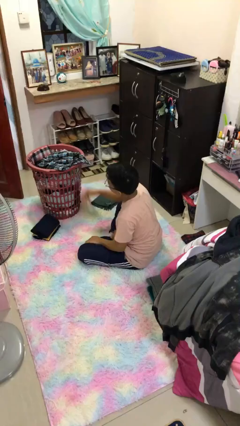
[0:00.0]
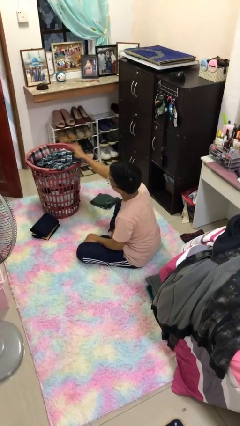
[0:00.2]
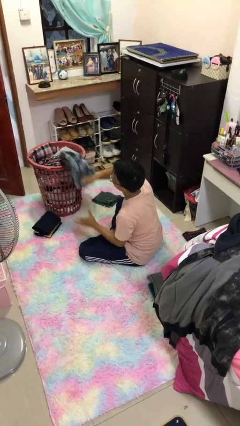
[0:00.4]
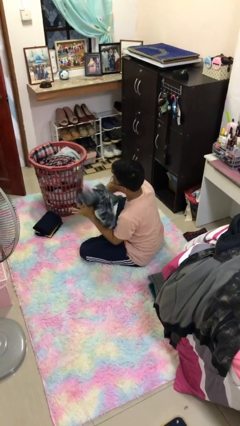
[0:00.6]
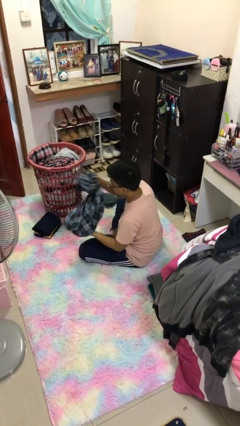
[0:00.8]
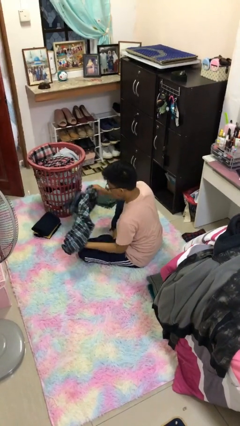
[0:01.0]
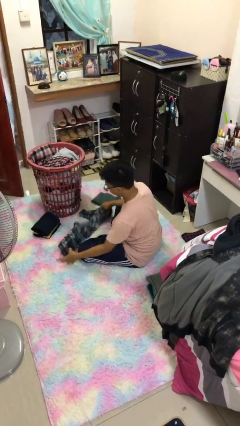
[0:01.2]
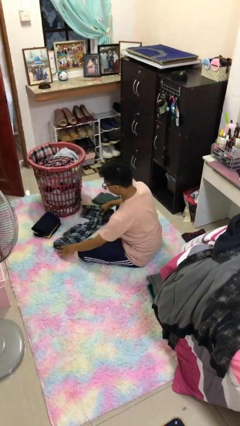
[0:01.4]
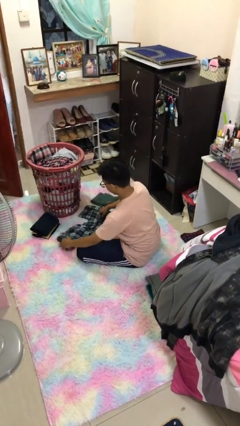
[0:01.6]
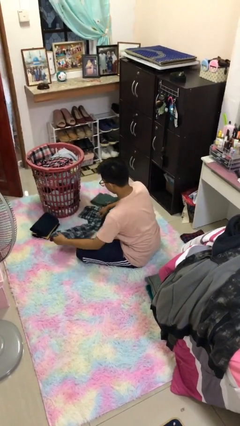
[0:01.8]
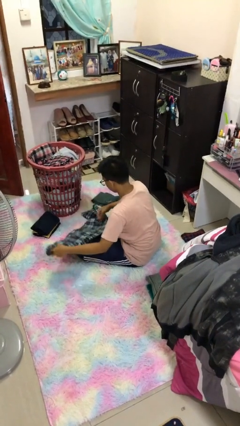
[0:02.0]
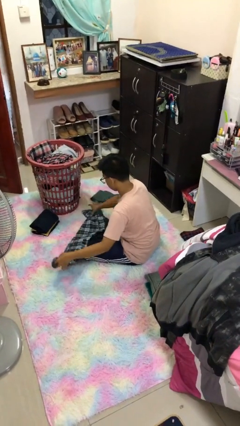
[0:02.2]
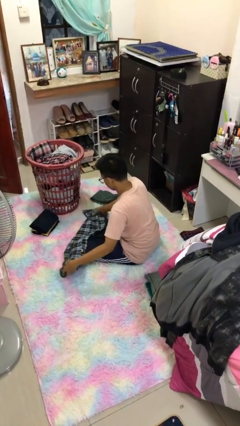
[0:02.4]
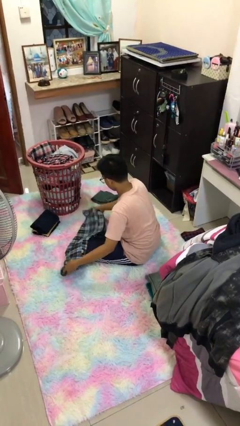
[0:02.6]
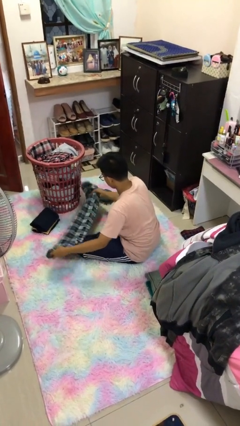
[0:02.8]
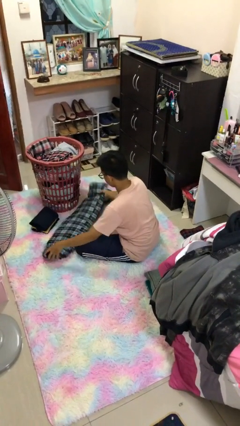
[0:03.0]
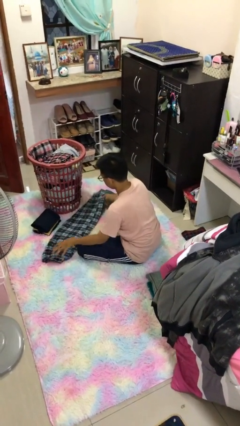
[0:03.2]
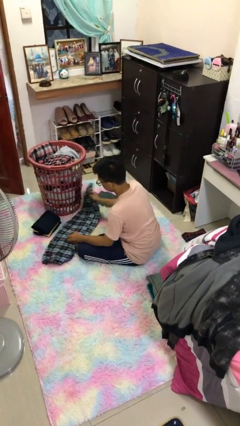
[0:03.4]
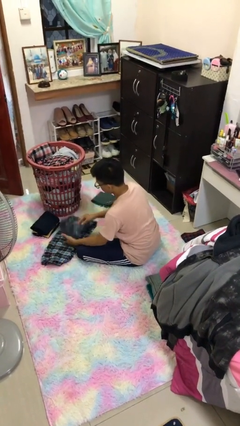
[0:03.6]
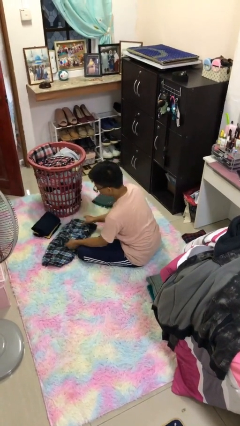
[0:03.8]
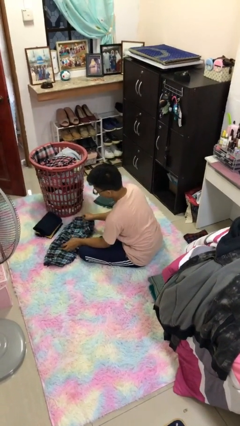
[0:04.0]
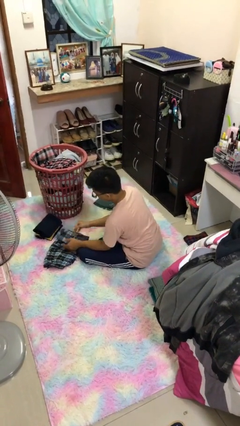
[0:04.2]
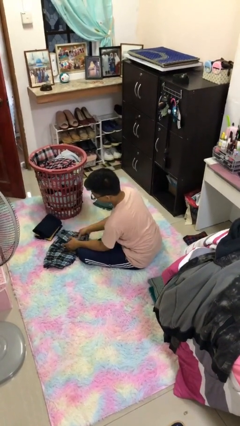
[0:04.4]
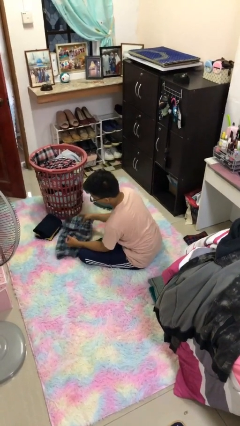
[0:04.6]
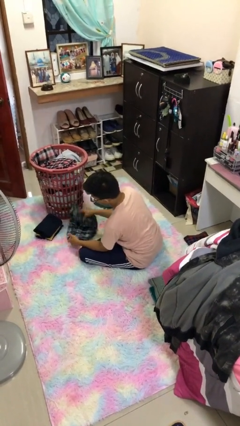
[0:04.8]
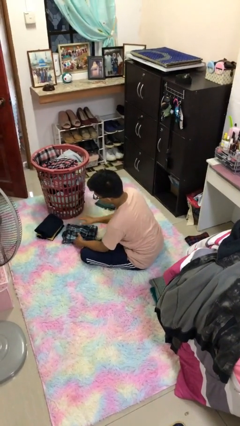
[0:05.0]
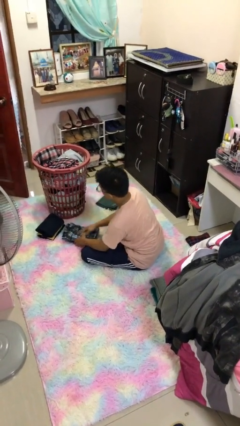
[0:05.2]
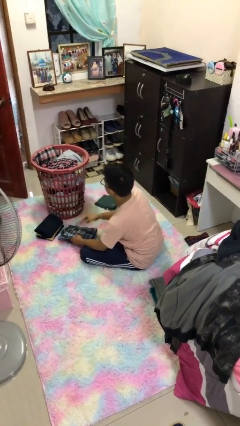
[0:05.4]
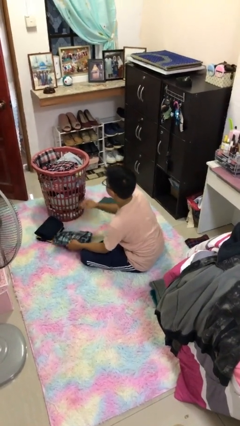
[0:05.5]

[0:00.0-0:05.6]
person folds pants

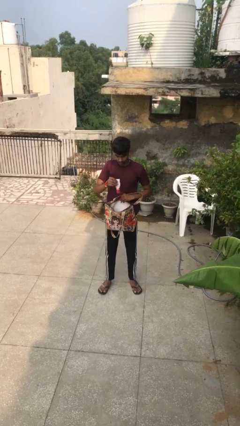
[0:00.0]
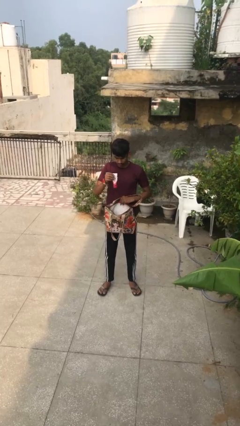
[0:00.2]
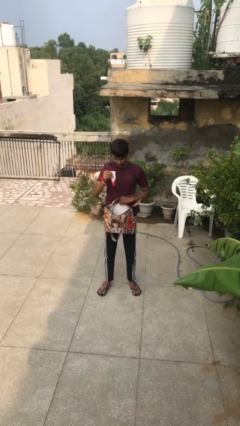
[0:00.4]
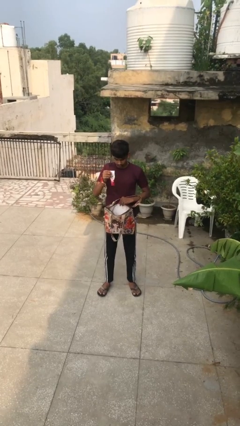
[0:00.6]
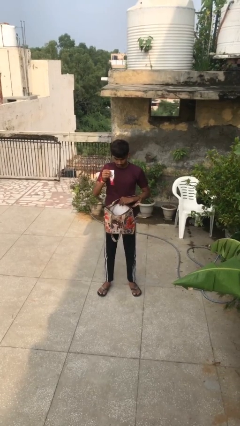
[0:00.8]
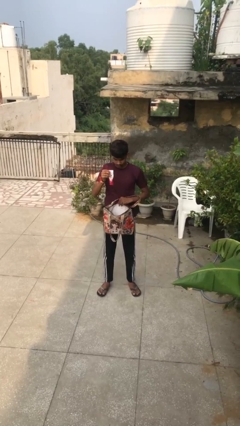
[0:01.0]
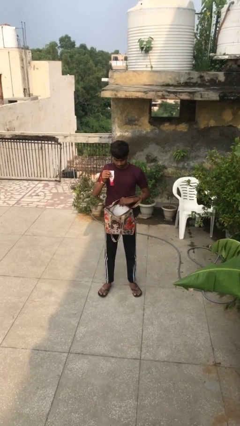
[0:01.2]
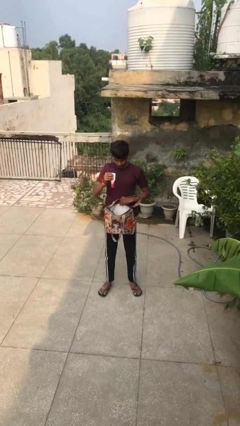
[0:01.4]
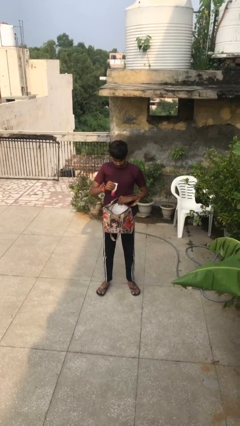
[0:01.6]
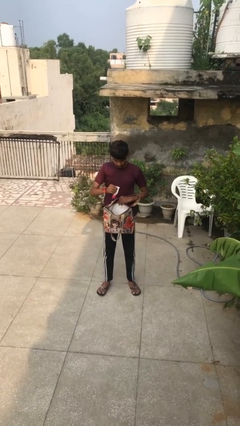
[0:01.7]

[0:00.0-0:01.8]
person takes object from purse

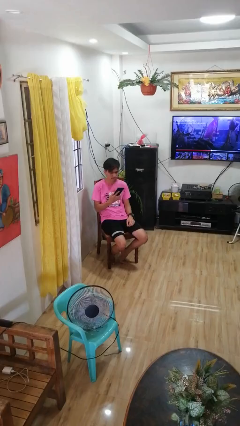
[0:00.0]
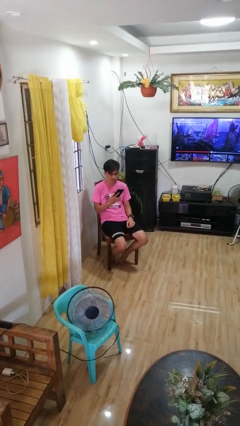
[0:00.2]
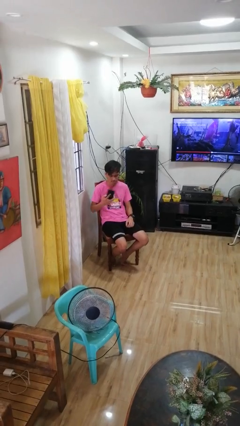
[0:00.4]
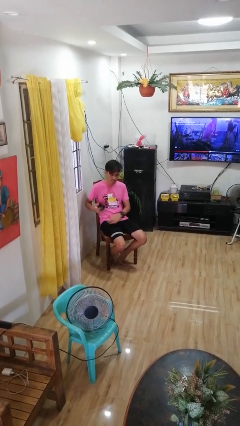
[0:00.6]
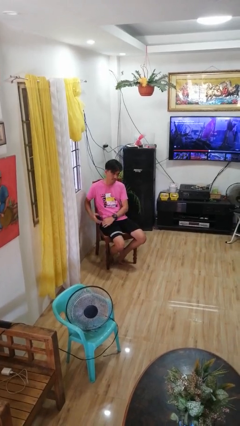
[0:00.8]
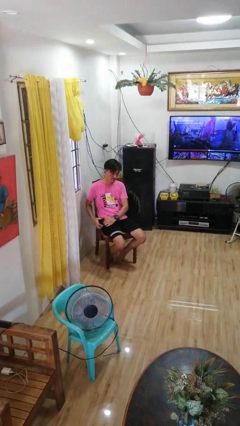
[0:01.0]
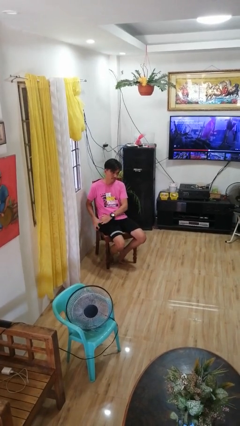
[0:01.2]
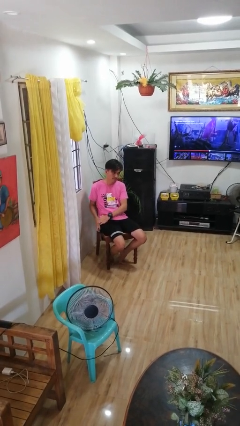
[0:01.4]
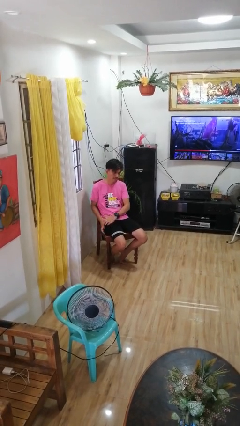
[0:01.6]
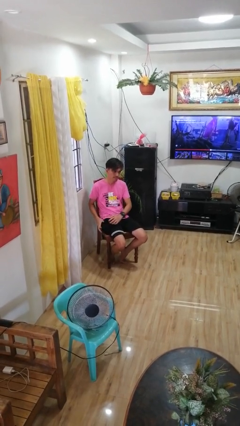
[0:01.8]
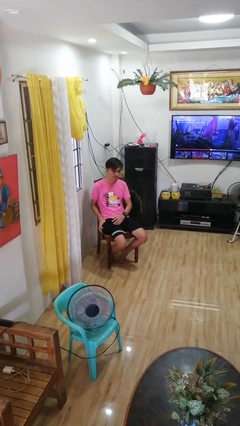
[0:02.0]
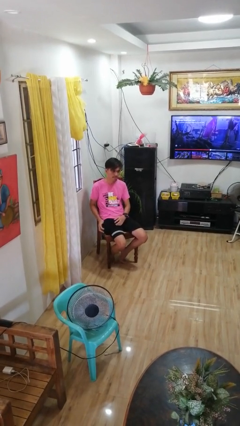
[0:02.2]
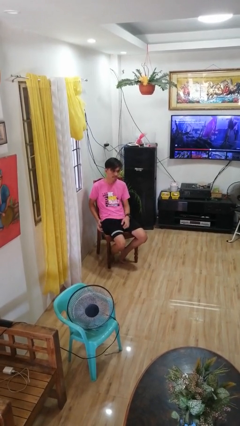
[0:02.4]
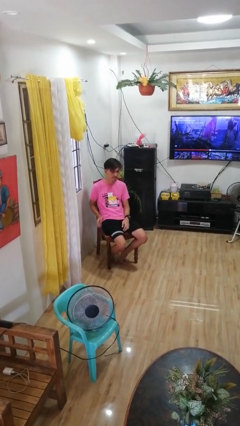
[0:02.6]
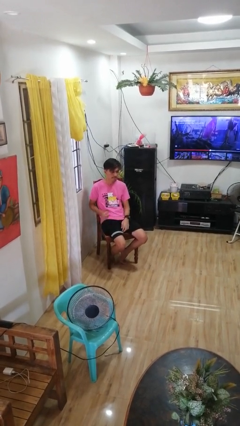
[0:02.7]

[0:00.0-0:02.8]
person puts phone into pocket

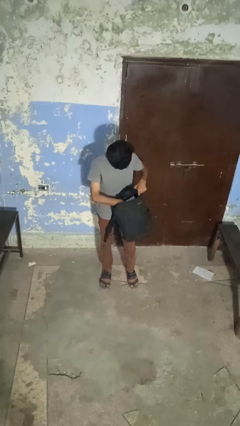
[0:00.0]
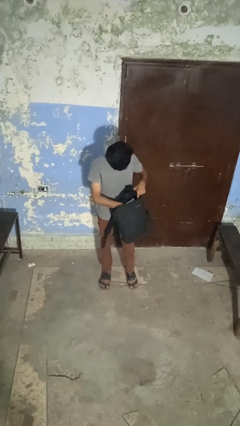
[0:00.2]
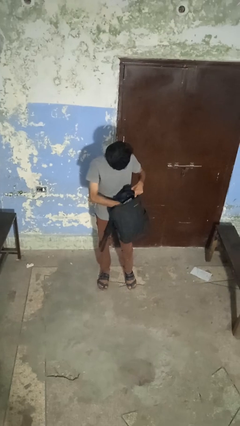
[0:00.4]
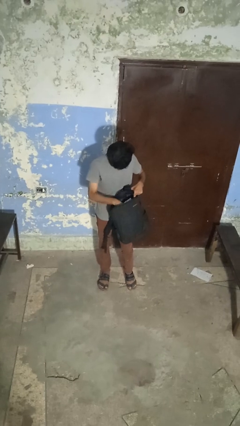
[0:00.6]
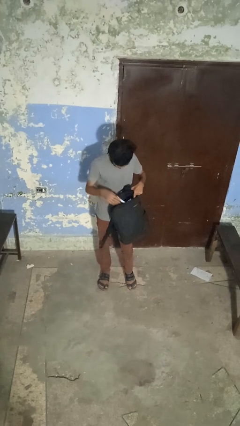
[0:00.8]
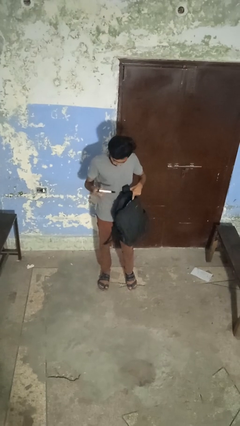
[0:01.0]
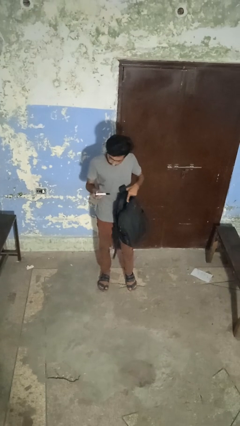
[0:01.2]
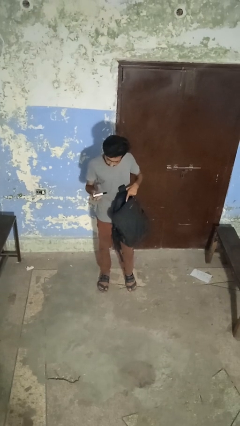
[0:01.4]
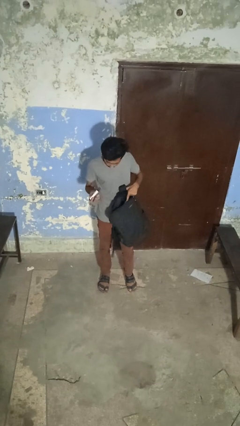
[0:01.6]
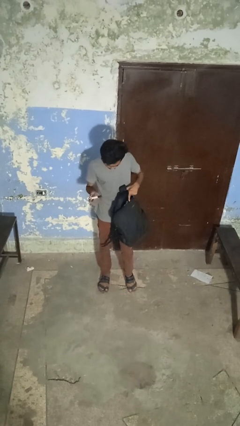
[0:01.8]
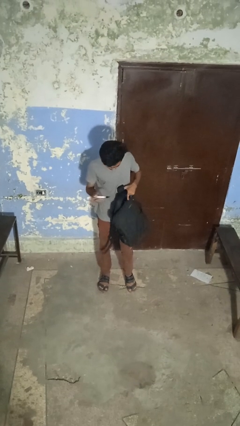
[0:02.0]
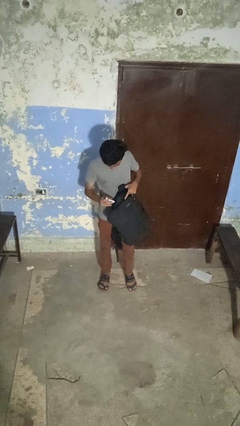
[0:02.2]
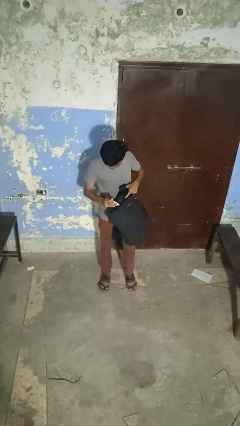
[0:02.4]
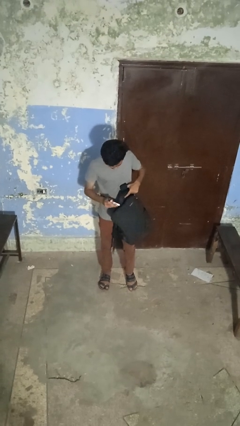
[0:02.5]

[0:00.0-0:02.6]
person takes object from backpack

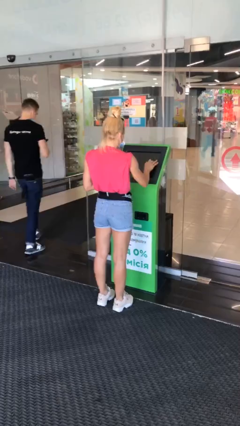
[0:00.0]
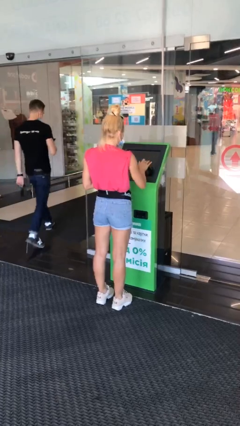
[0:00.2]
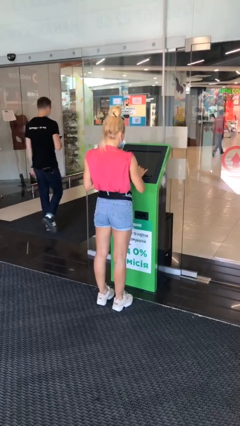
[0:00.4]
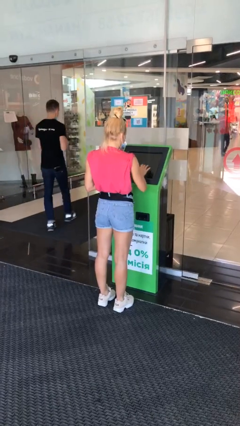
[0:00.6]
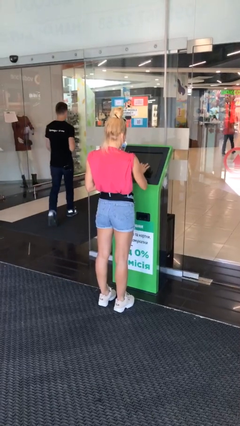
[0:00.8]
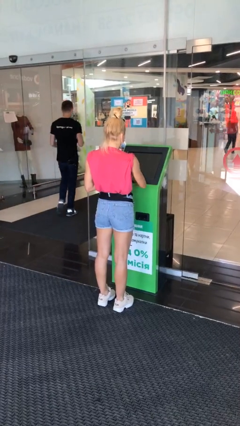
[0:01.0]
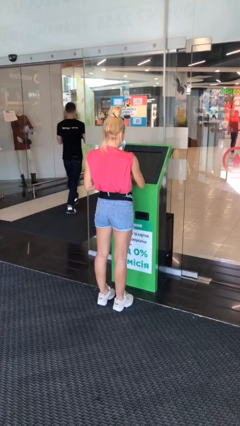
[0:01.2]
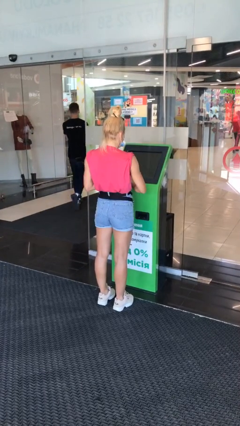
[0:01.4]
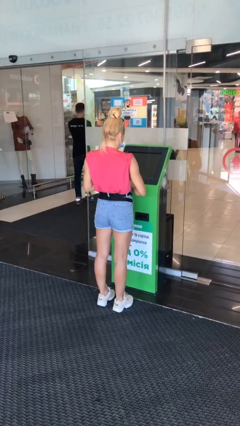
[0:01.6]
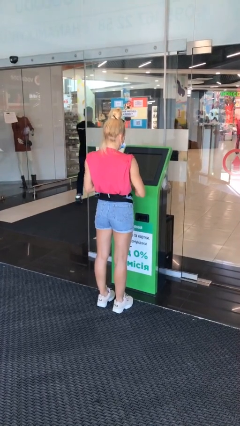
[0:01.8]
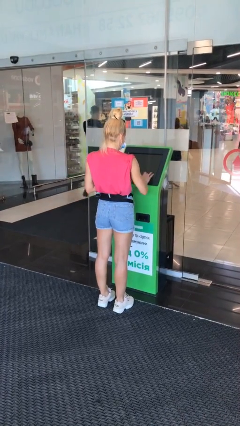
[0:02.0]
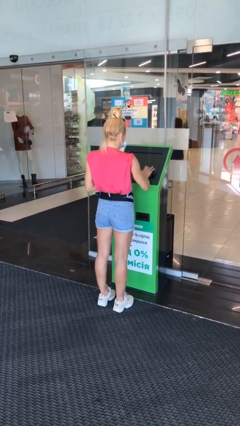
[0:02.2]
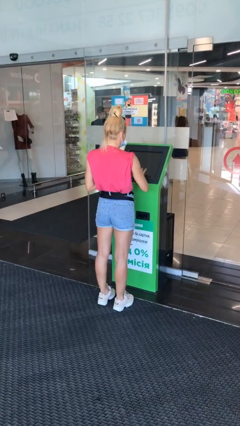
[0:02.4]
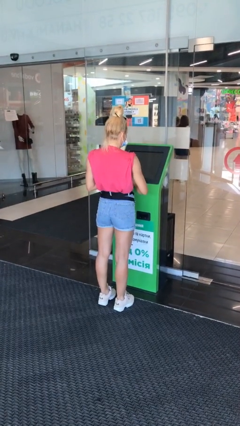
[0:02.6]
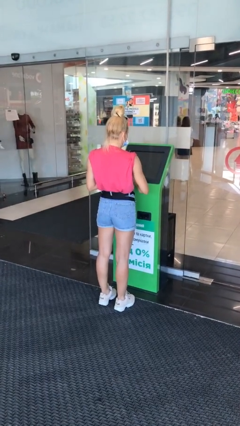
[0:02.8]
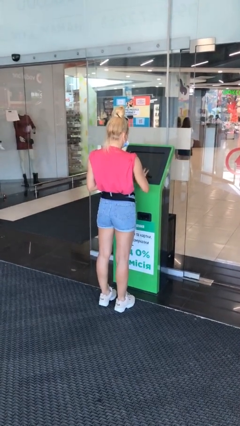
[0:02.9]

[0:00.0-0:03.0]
person purchases from machine

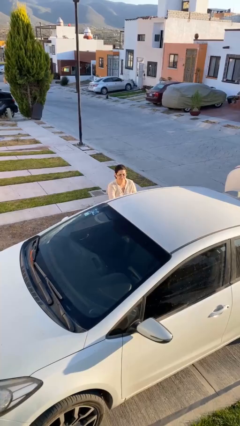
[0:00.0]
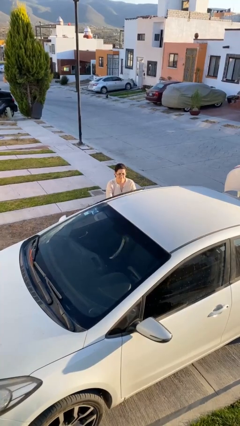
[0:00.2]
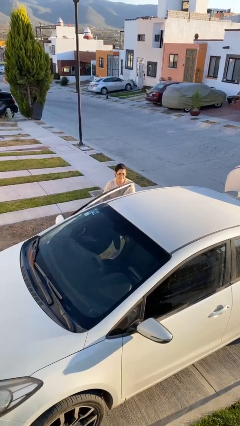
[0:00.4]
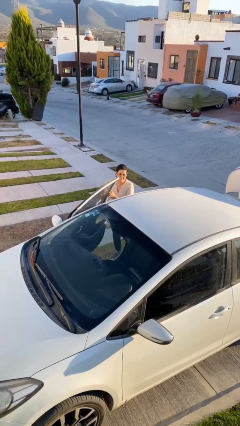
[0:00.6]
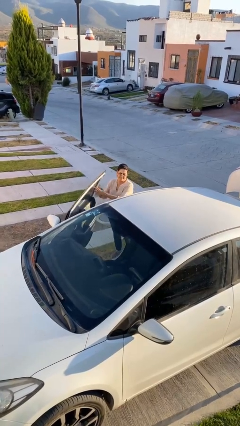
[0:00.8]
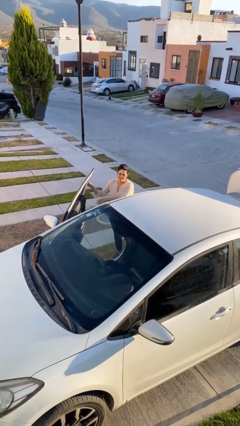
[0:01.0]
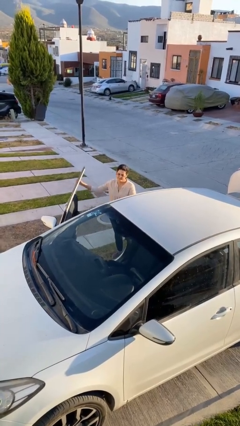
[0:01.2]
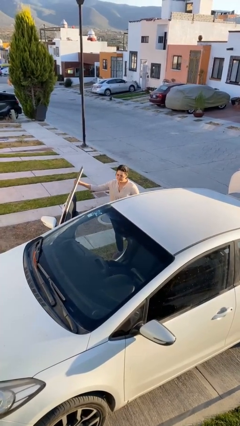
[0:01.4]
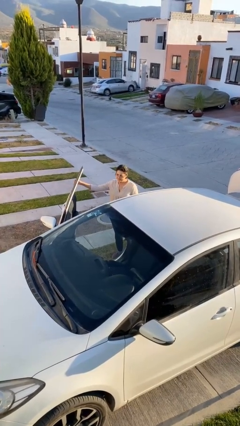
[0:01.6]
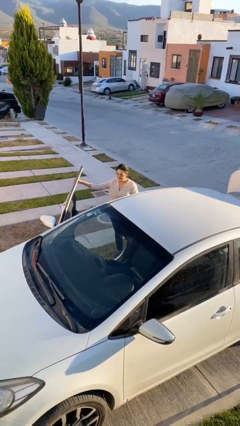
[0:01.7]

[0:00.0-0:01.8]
person opens car door
